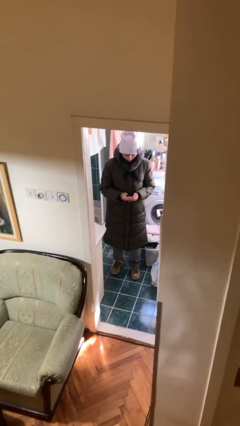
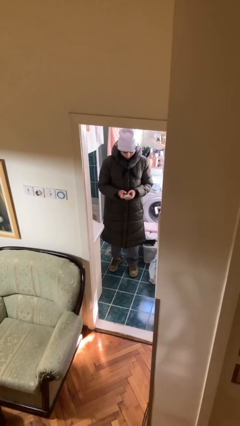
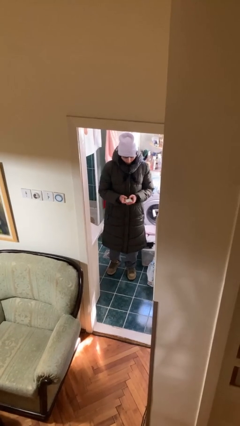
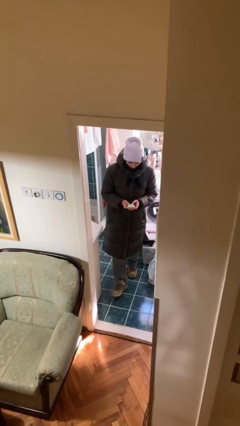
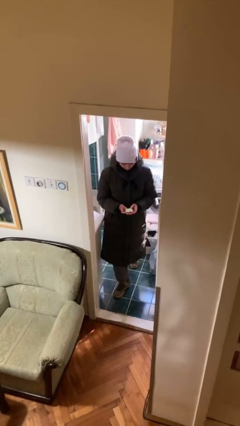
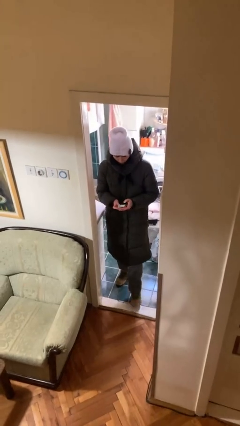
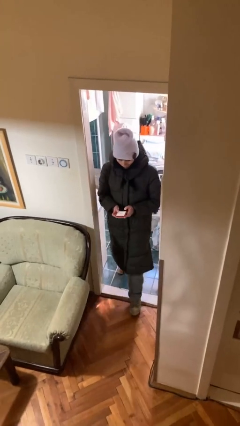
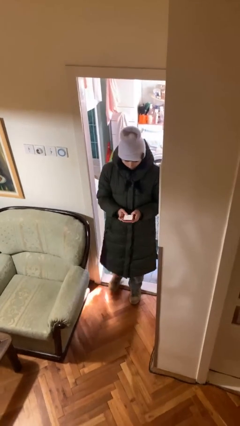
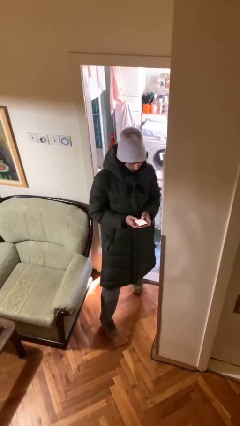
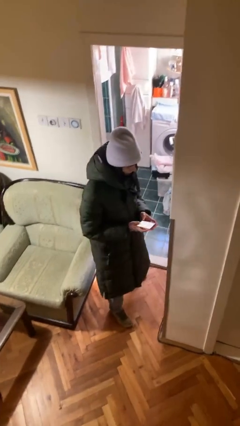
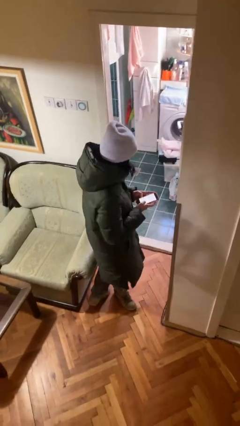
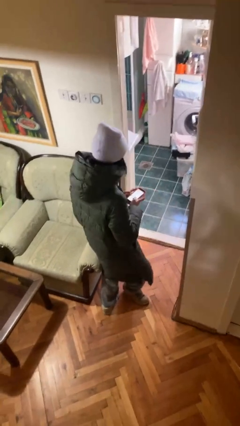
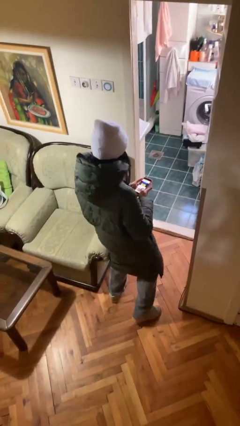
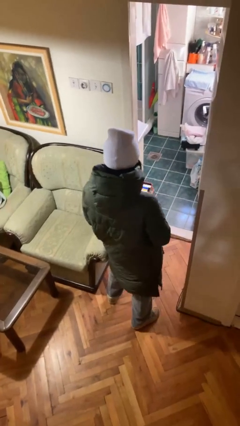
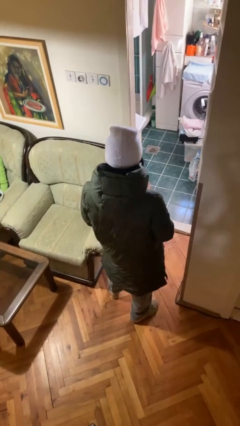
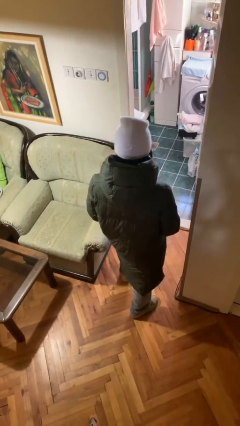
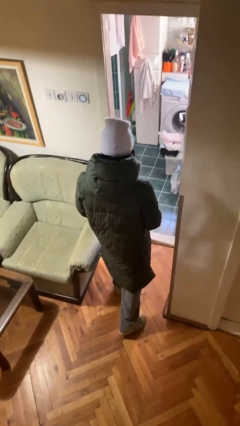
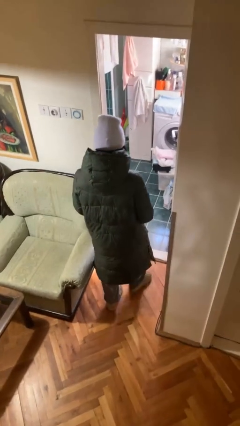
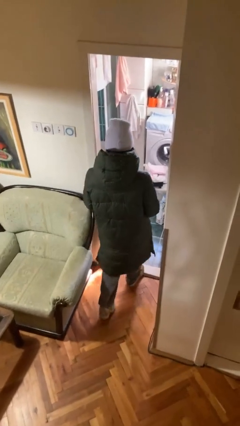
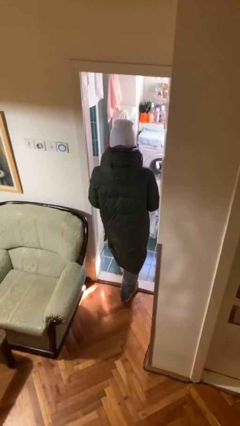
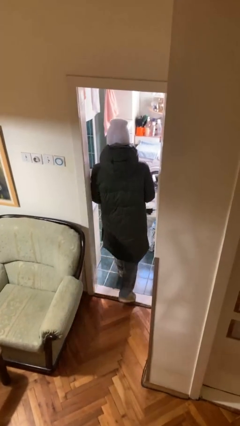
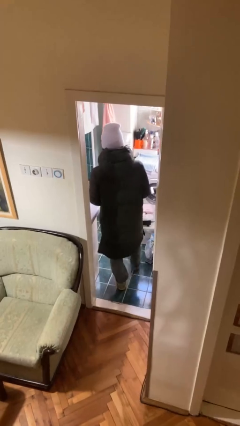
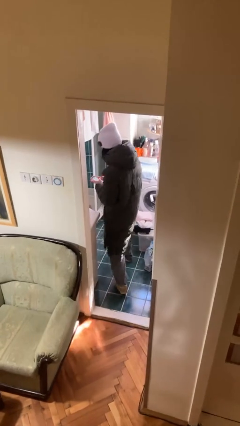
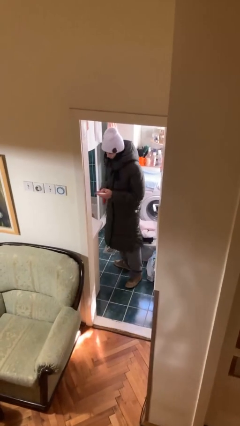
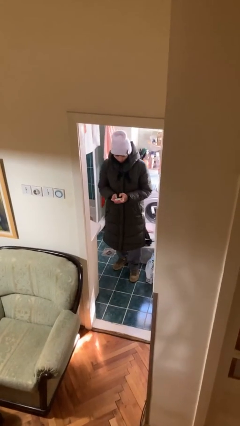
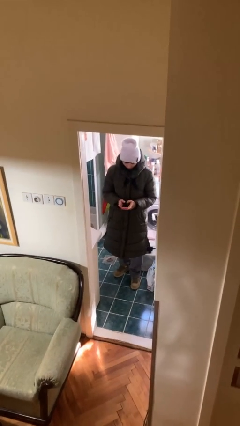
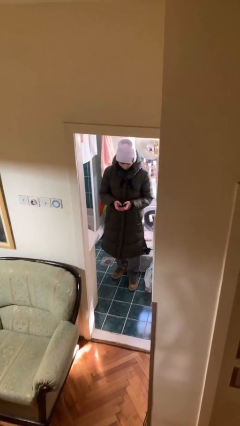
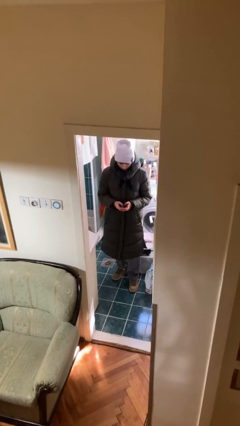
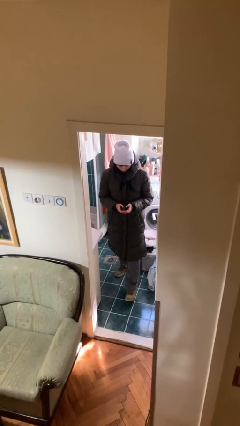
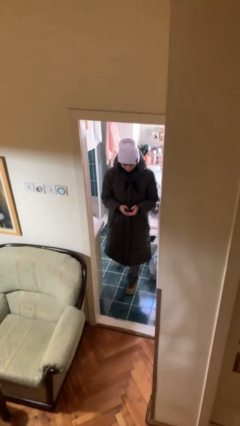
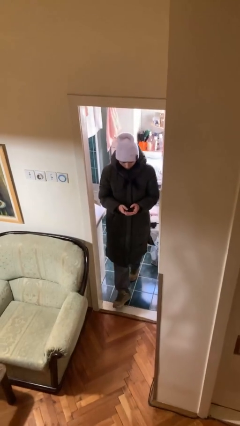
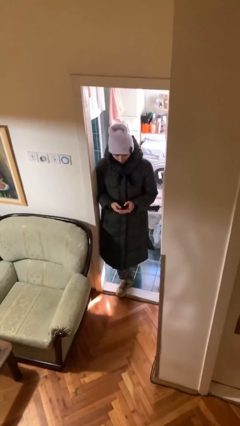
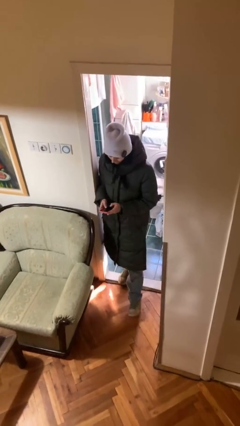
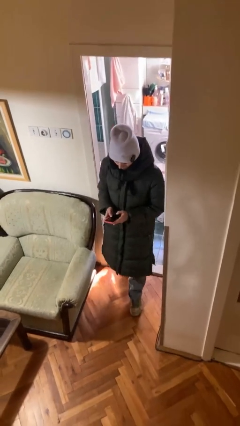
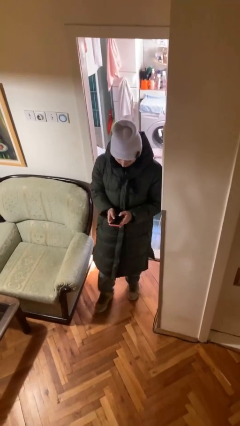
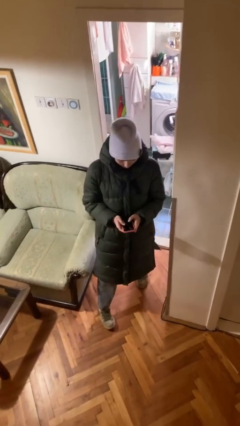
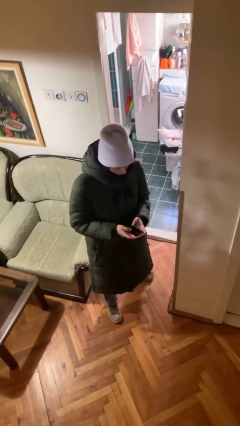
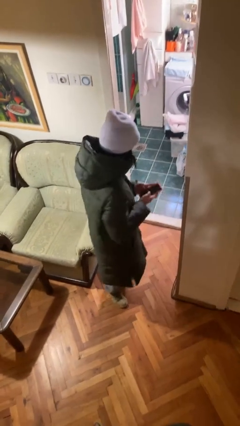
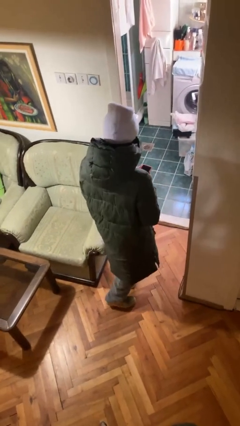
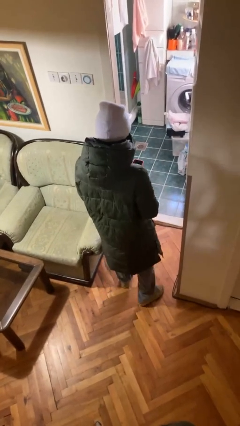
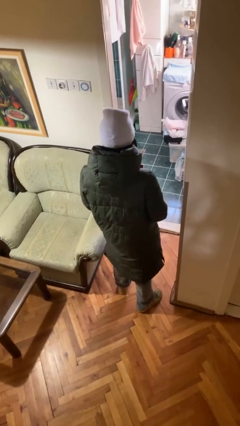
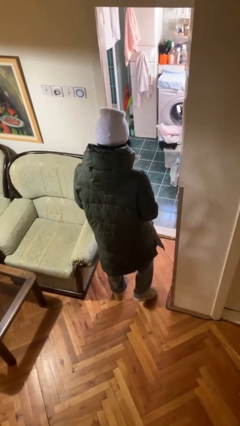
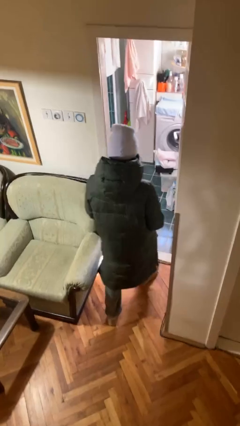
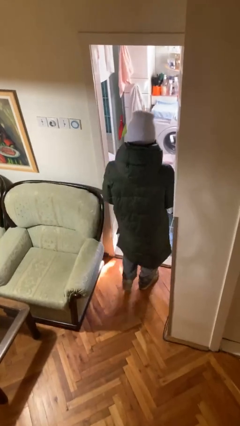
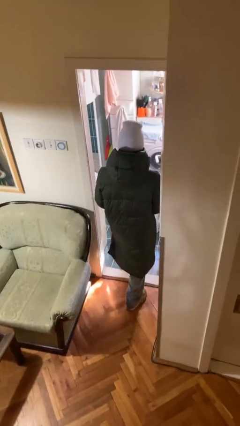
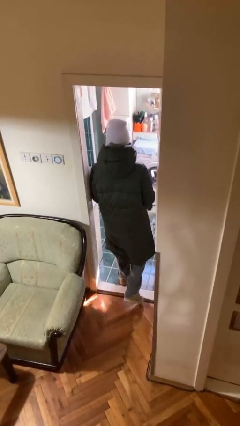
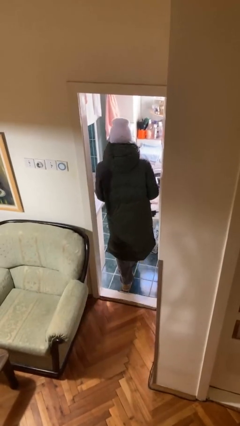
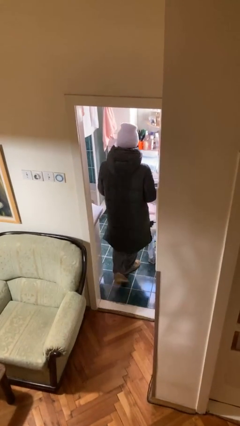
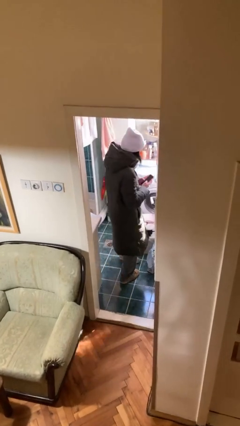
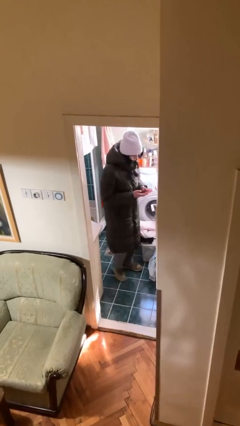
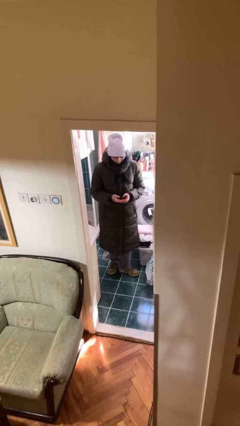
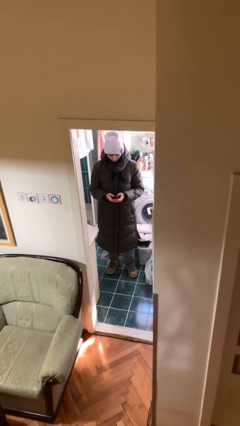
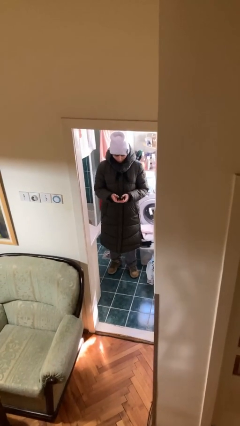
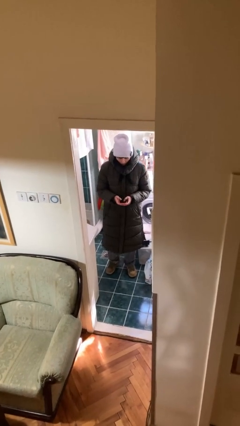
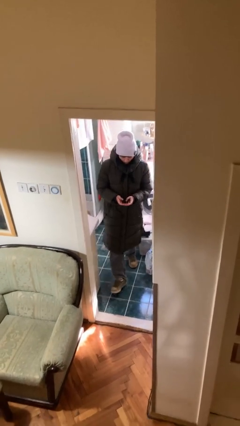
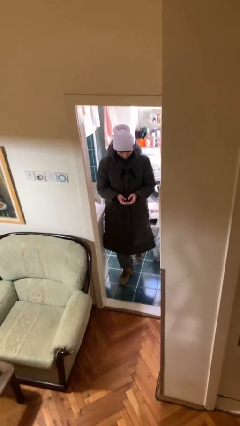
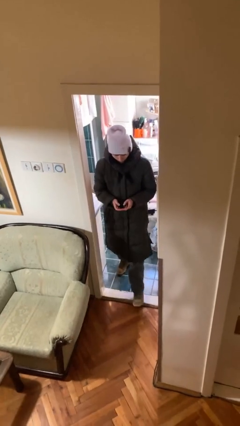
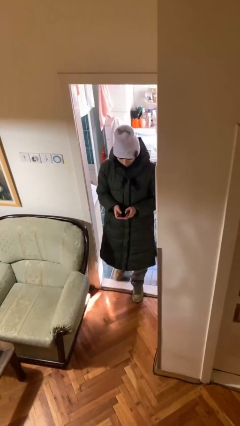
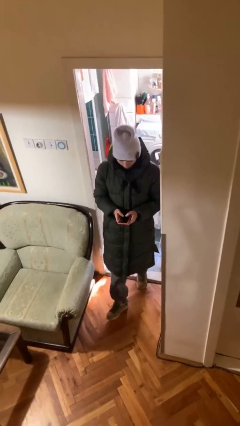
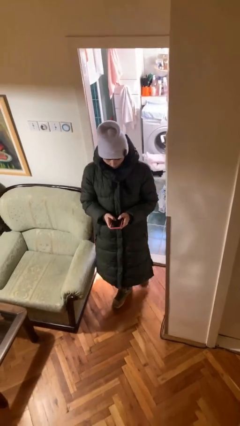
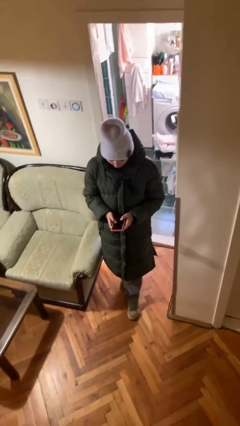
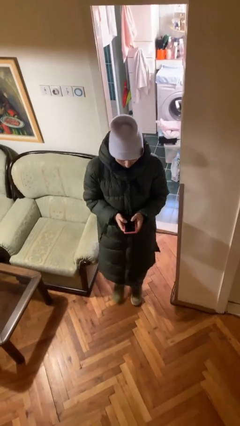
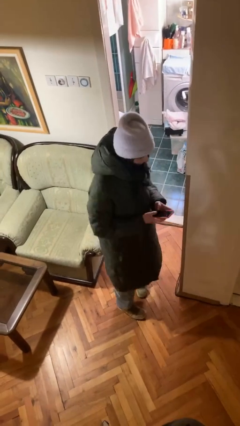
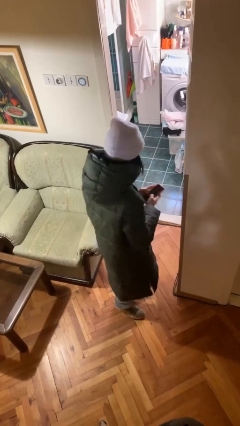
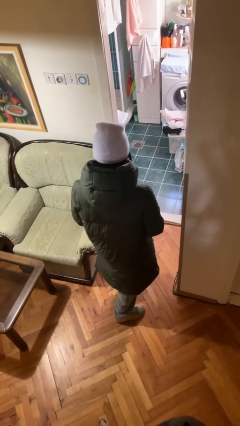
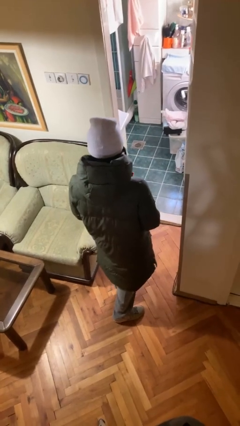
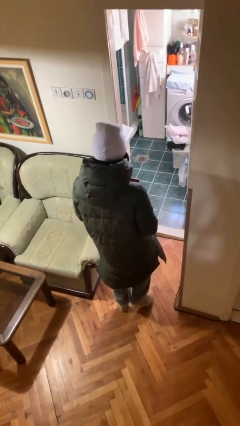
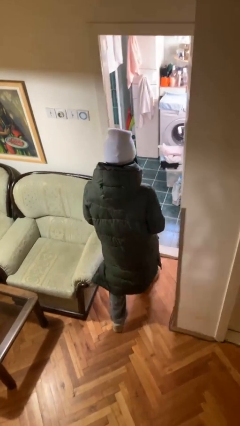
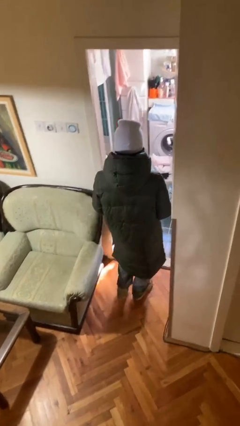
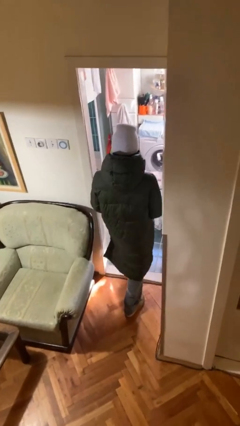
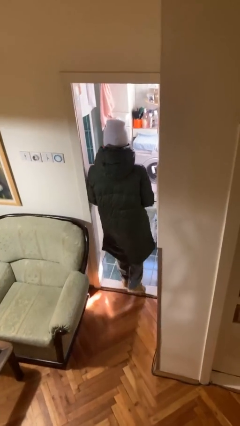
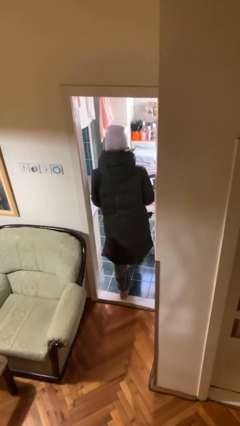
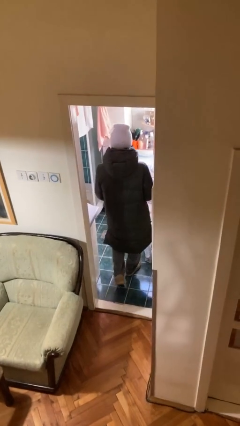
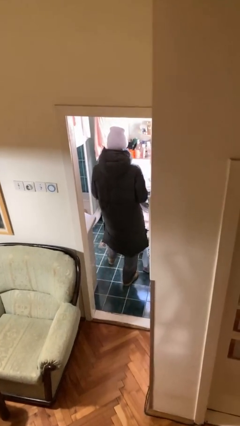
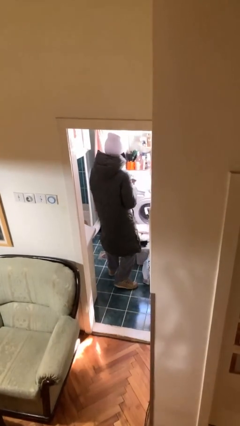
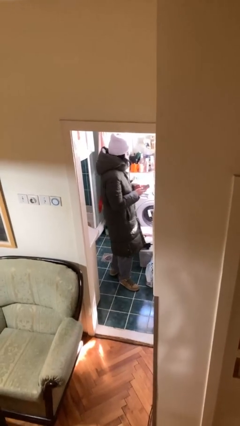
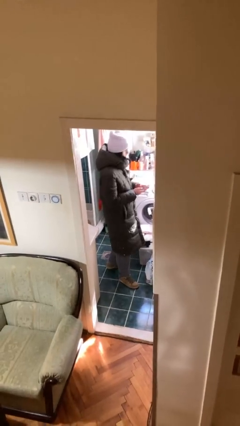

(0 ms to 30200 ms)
person texts on phone

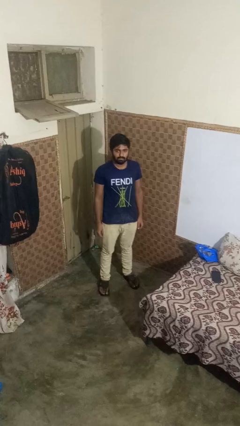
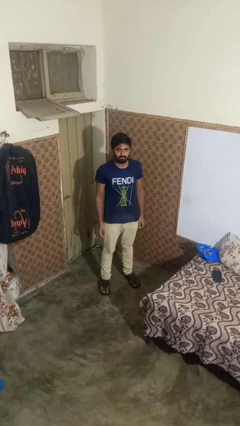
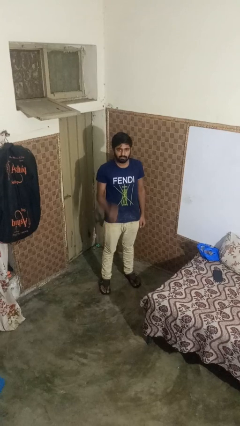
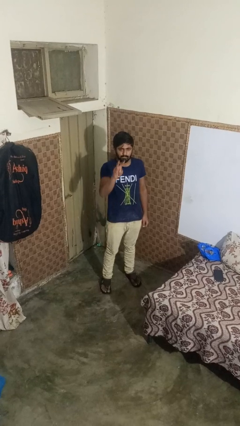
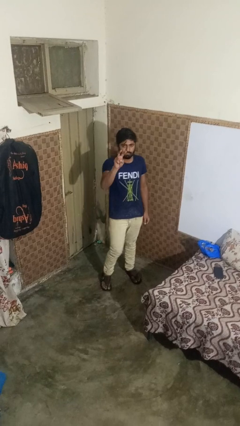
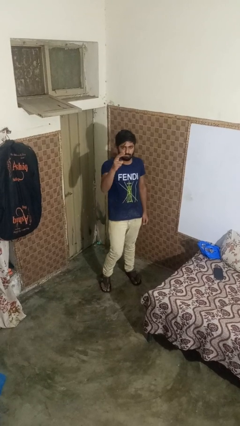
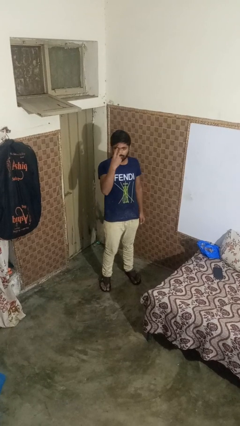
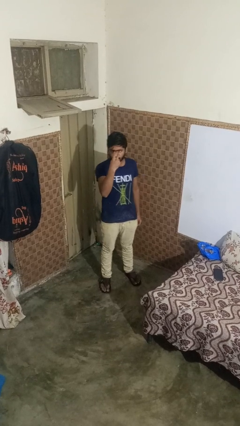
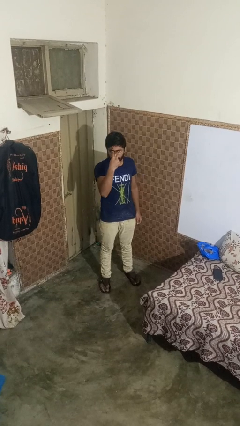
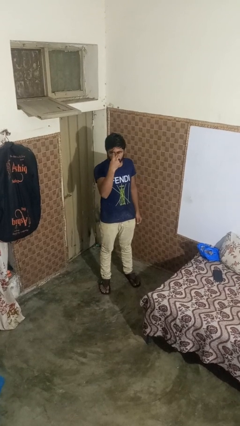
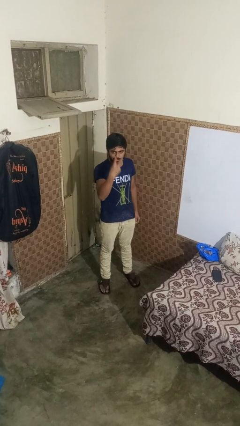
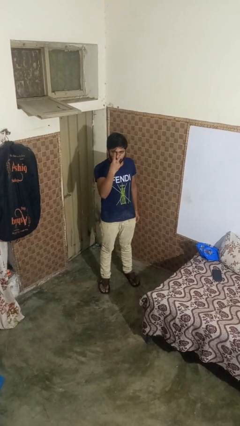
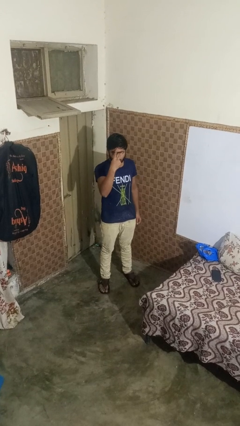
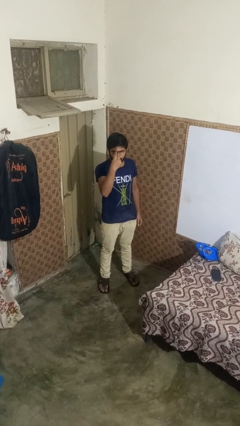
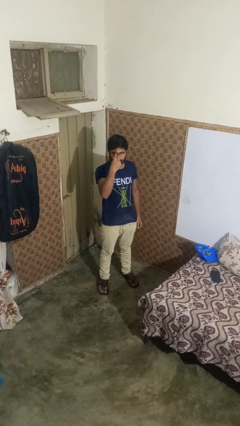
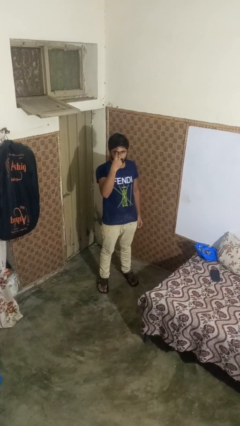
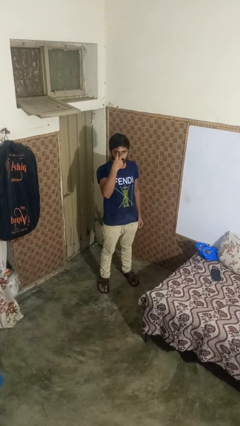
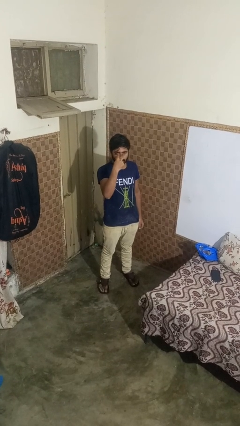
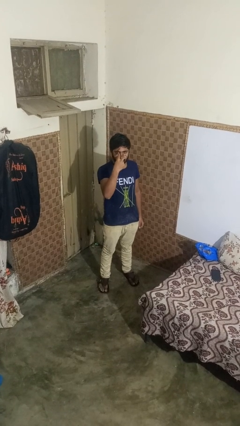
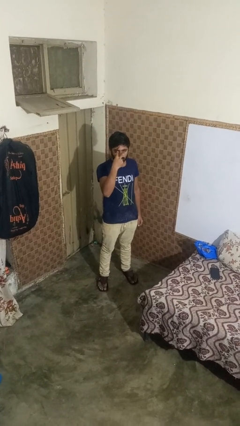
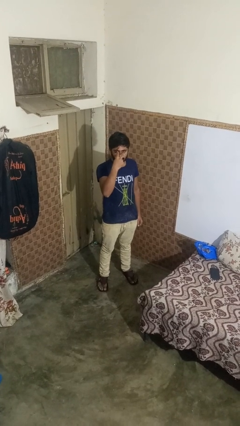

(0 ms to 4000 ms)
person gestures watch closely
